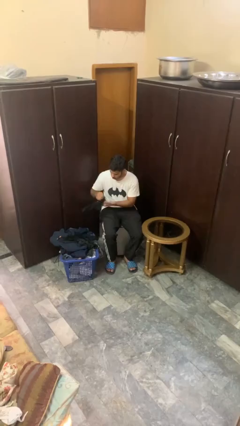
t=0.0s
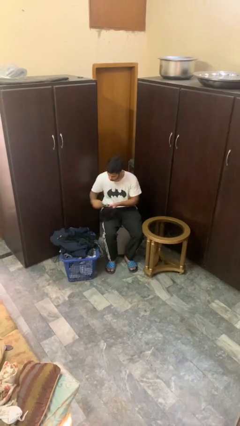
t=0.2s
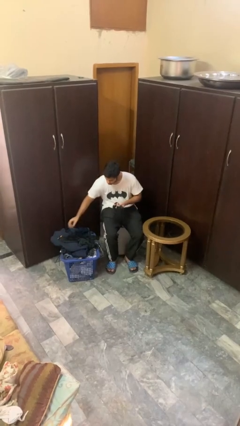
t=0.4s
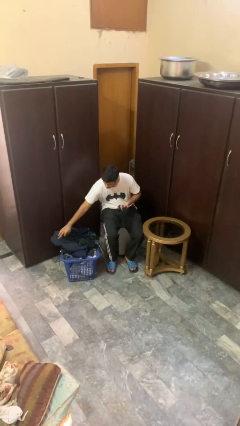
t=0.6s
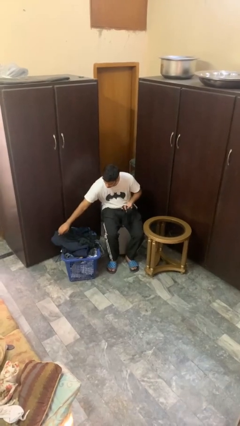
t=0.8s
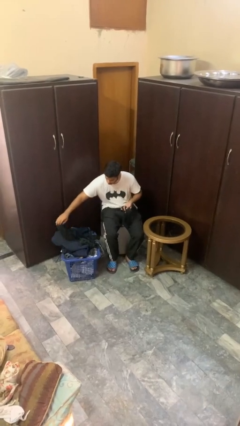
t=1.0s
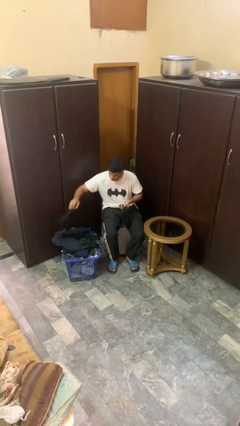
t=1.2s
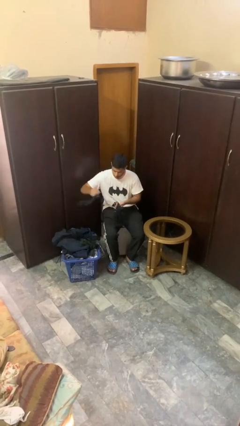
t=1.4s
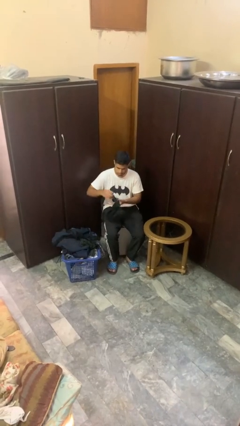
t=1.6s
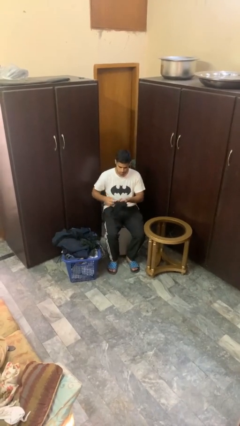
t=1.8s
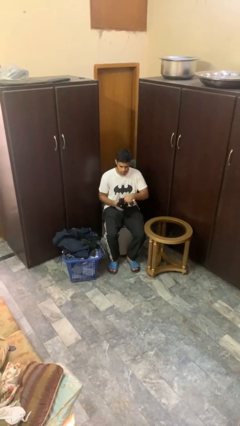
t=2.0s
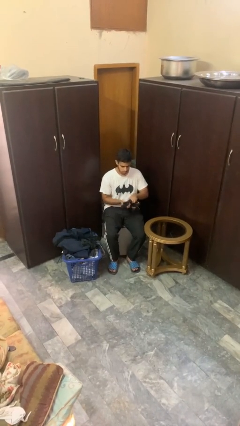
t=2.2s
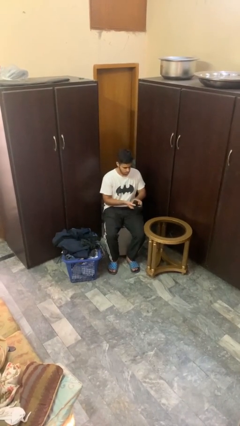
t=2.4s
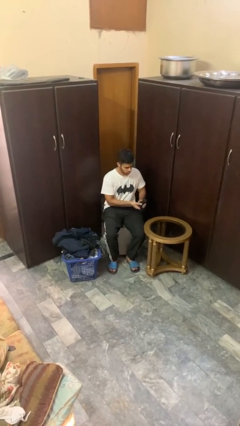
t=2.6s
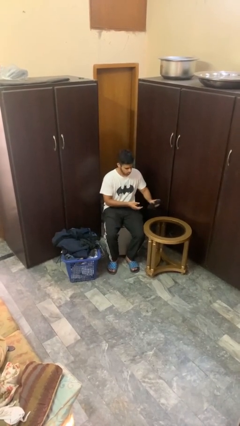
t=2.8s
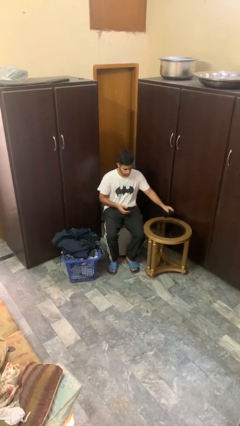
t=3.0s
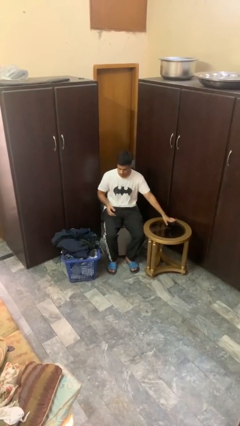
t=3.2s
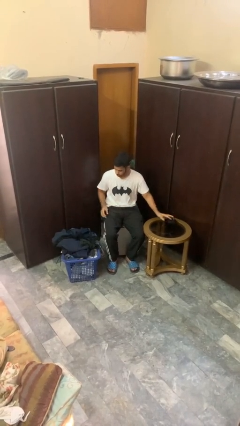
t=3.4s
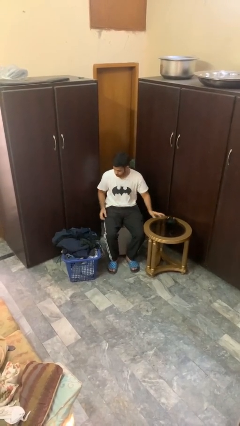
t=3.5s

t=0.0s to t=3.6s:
person folds socks

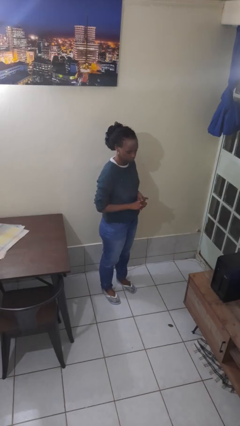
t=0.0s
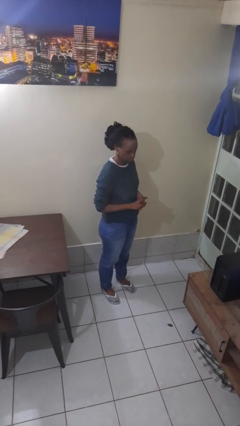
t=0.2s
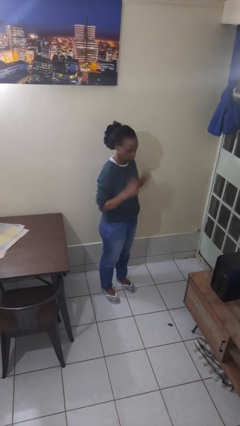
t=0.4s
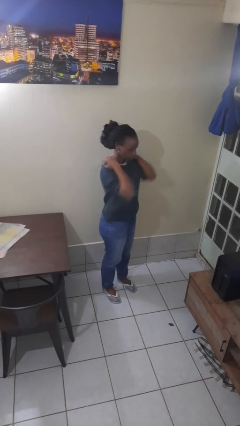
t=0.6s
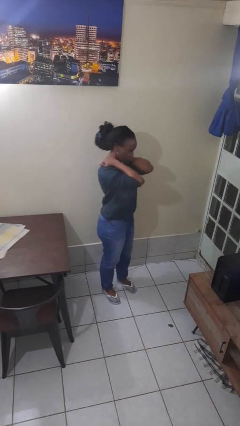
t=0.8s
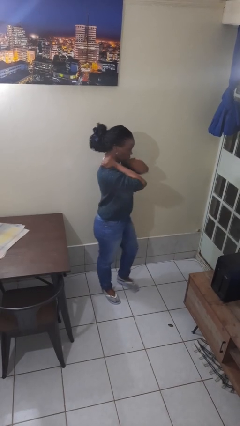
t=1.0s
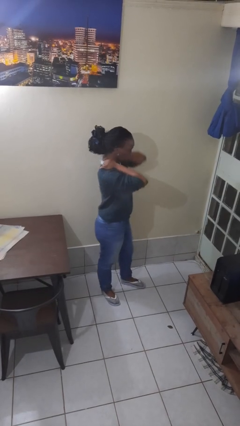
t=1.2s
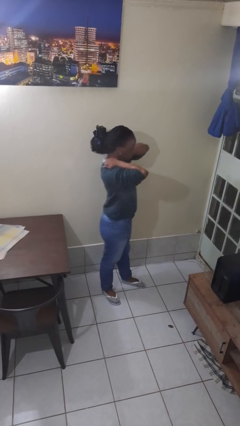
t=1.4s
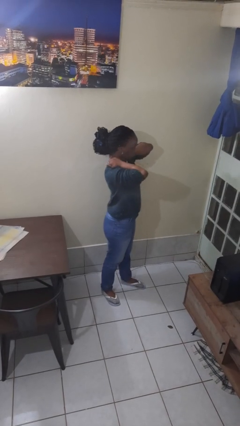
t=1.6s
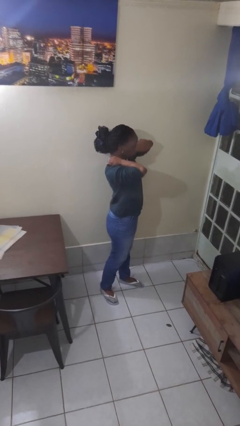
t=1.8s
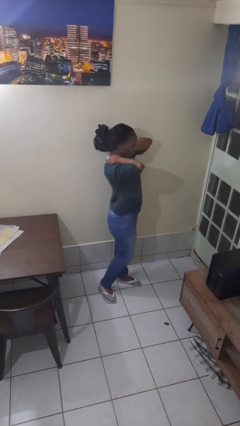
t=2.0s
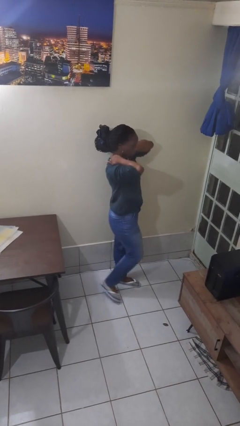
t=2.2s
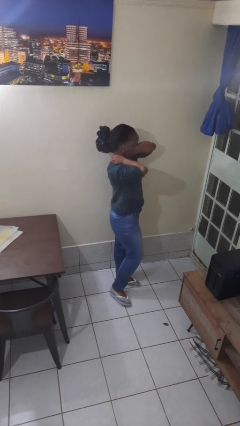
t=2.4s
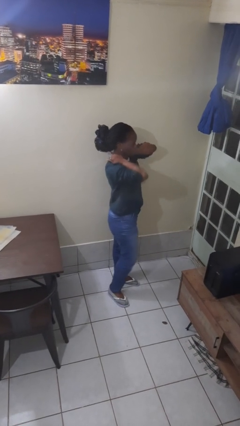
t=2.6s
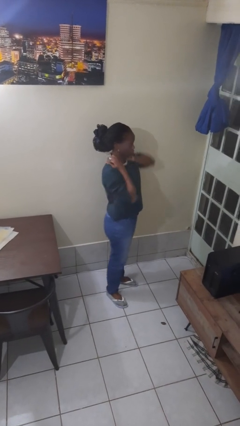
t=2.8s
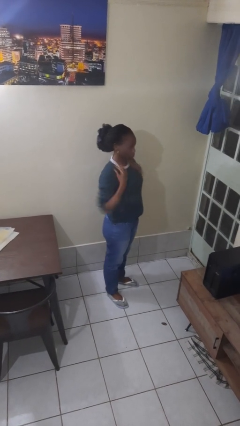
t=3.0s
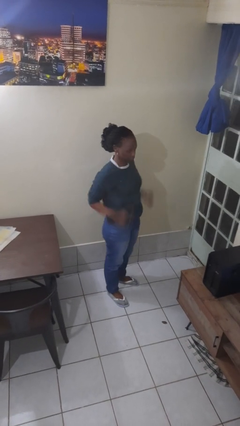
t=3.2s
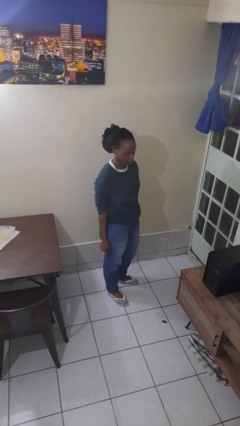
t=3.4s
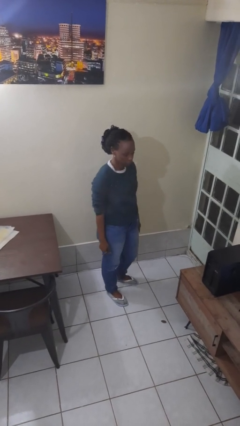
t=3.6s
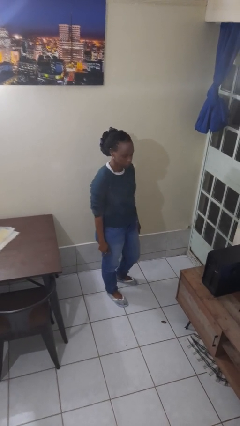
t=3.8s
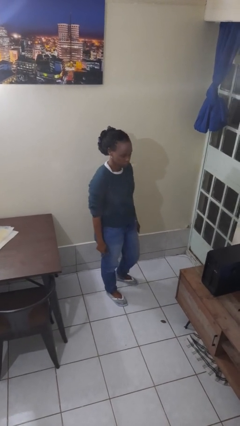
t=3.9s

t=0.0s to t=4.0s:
person rubs neck

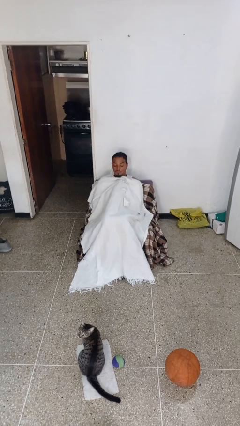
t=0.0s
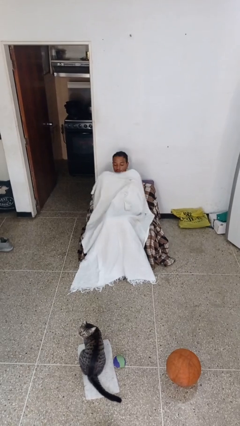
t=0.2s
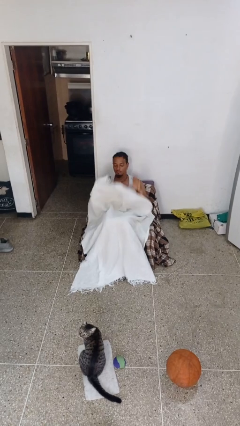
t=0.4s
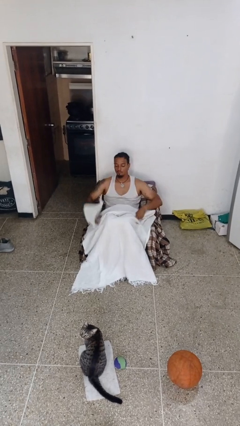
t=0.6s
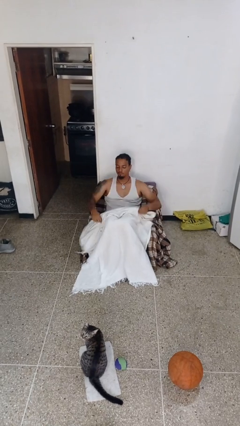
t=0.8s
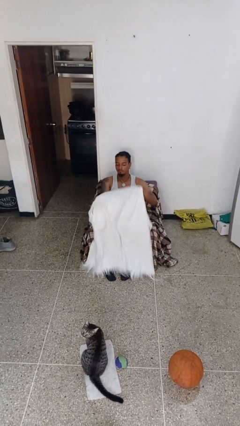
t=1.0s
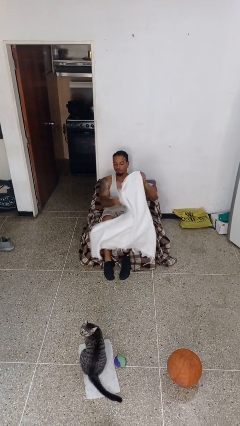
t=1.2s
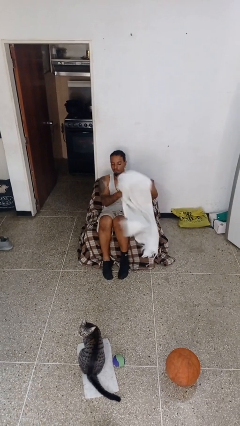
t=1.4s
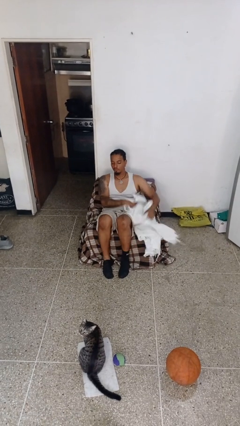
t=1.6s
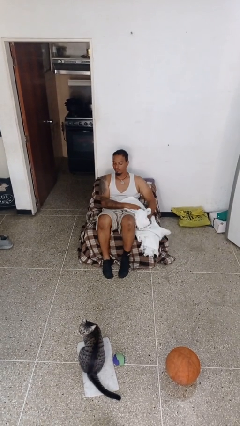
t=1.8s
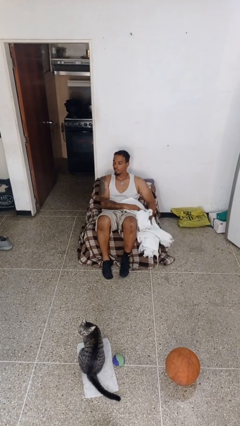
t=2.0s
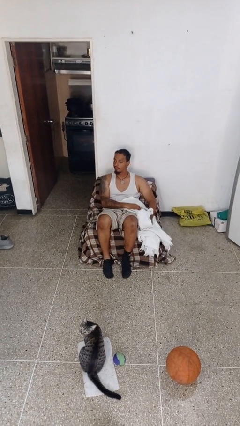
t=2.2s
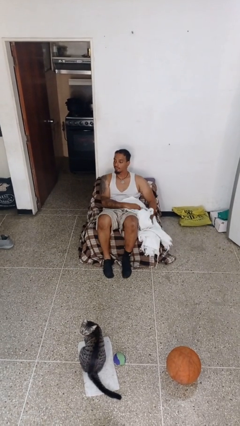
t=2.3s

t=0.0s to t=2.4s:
person uncovers with blanket

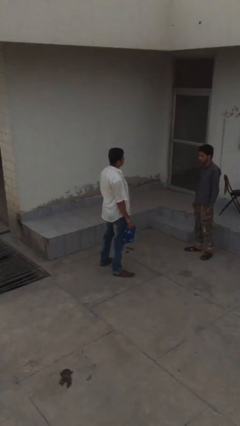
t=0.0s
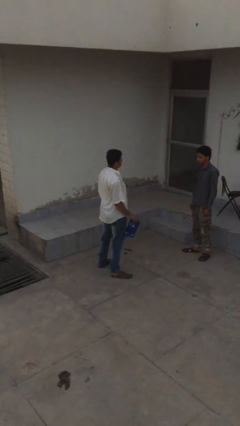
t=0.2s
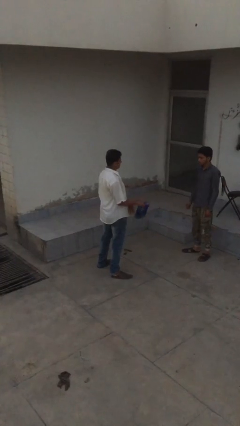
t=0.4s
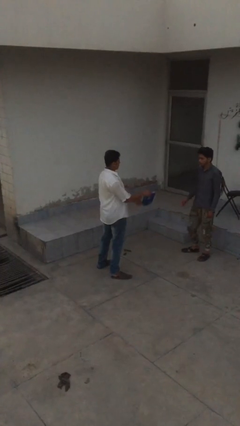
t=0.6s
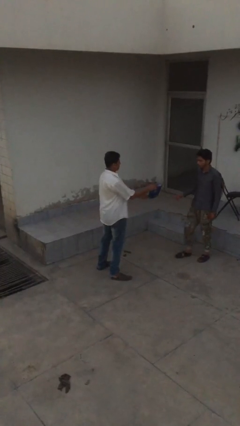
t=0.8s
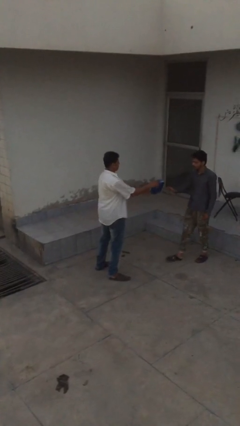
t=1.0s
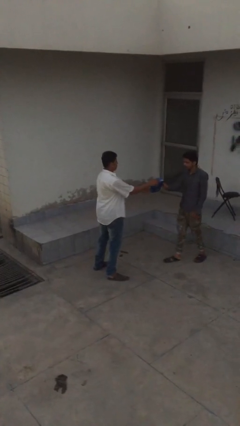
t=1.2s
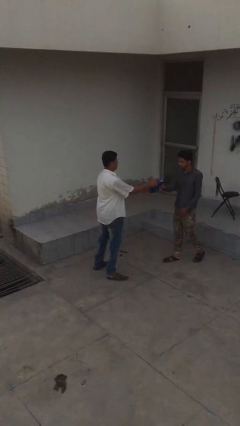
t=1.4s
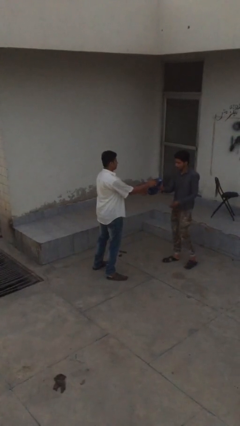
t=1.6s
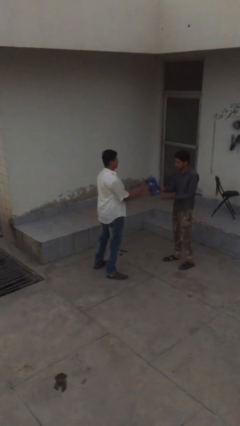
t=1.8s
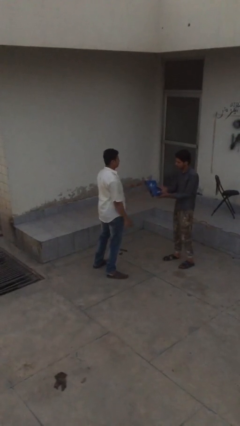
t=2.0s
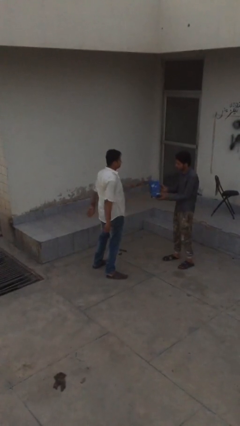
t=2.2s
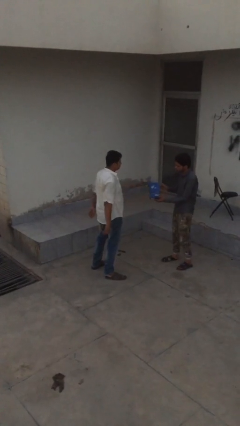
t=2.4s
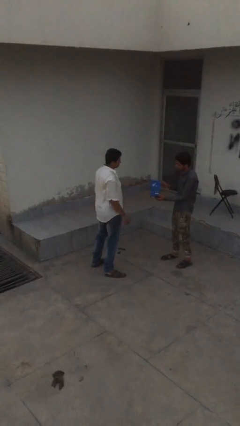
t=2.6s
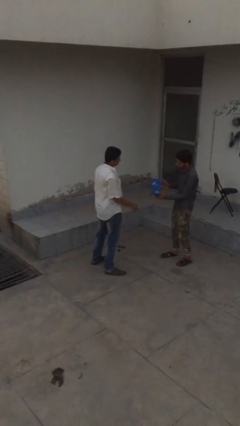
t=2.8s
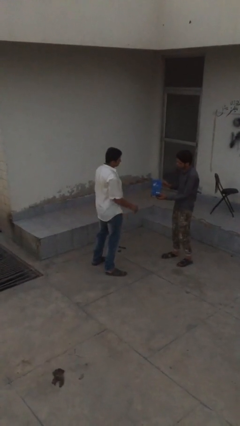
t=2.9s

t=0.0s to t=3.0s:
person transfers object to person

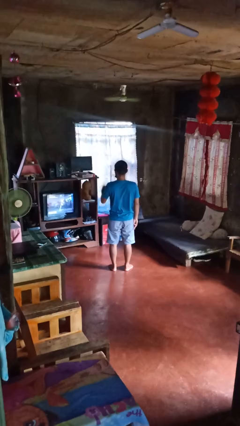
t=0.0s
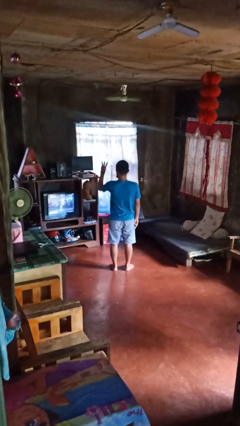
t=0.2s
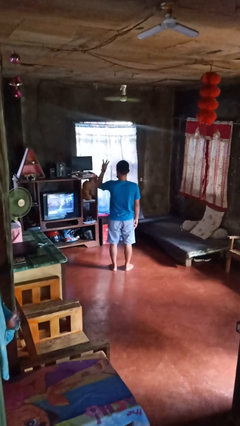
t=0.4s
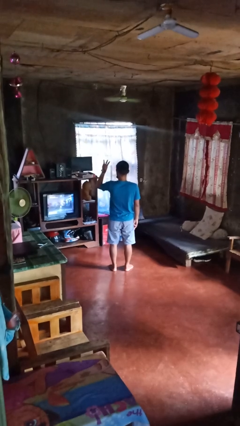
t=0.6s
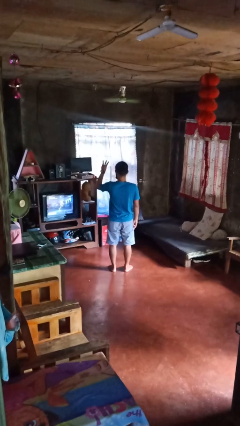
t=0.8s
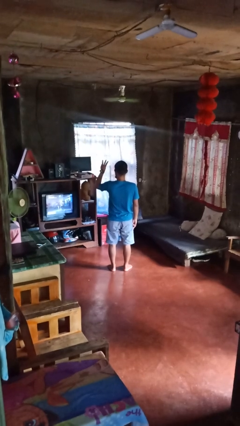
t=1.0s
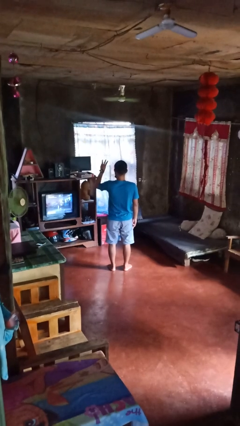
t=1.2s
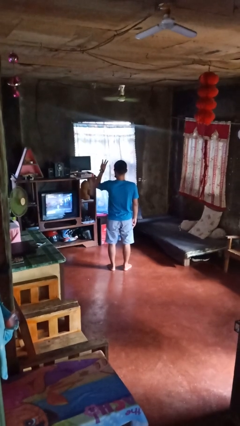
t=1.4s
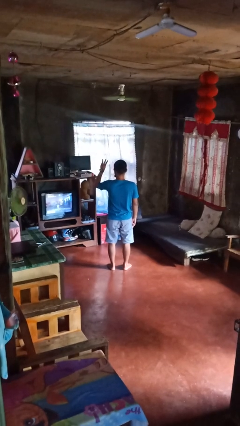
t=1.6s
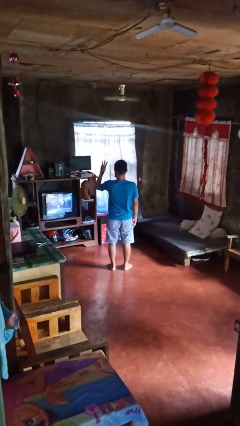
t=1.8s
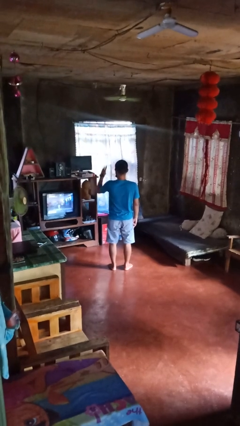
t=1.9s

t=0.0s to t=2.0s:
person gestures number three

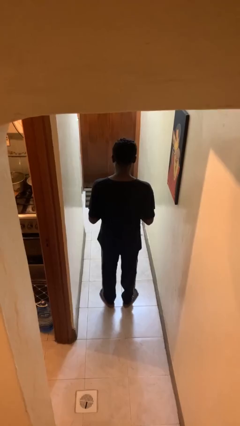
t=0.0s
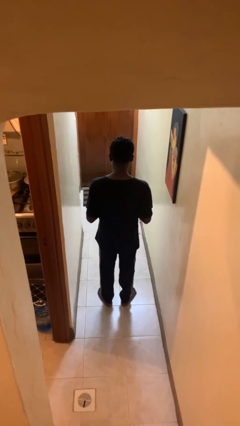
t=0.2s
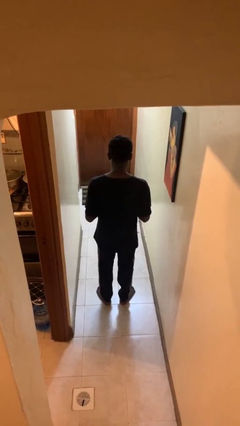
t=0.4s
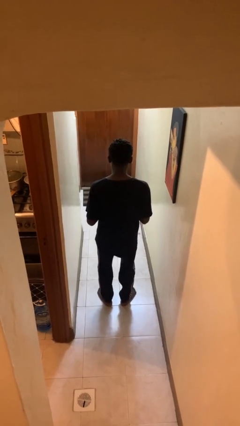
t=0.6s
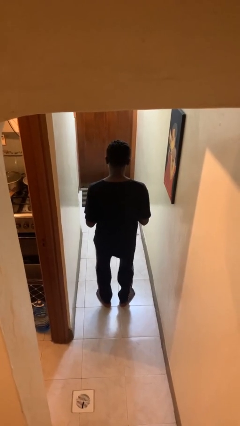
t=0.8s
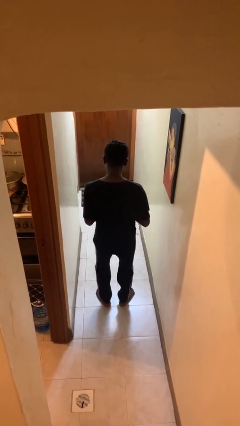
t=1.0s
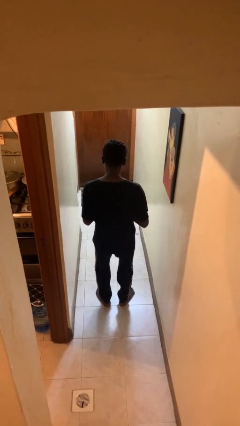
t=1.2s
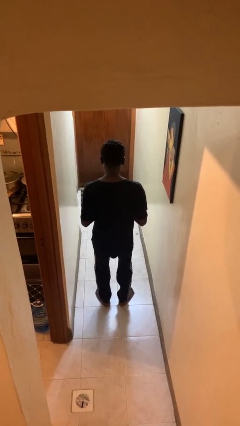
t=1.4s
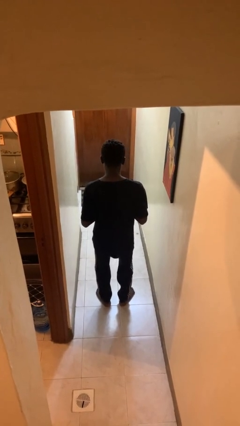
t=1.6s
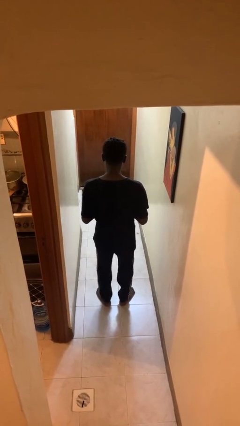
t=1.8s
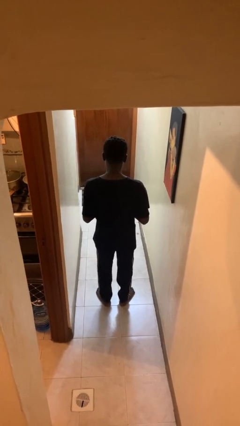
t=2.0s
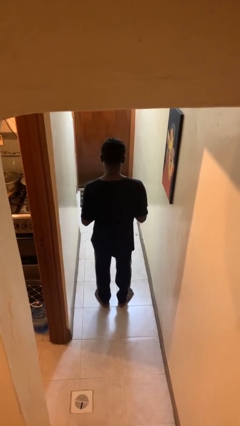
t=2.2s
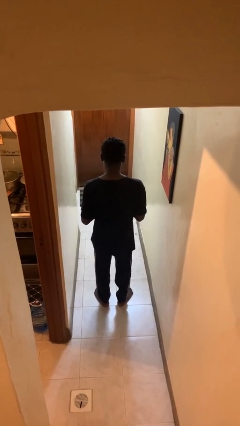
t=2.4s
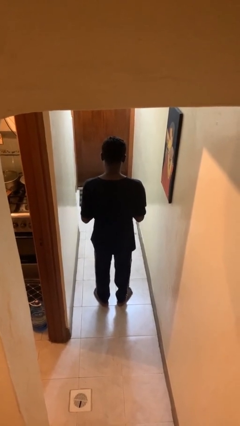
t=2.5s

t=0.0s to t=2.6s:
person dances in place
